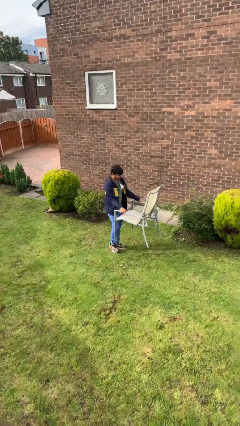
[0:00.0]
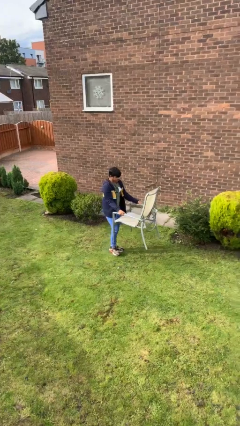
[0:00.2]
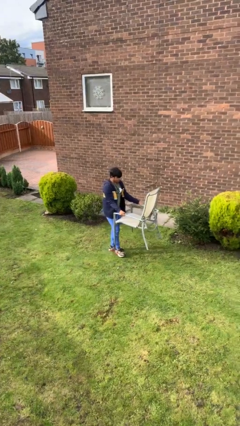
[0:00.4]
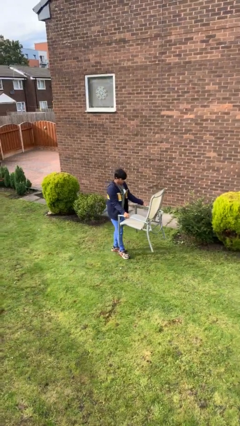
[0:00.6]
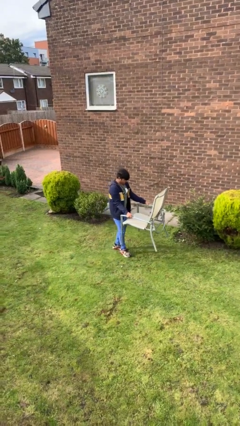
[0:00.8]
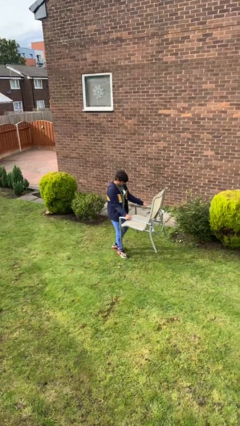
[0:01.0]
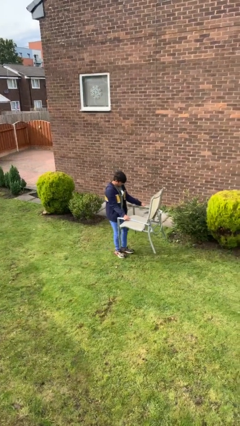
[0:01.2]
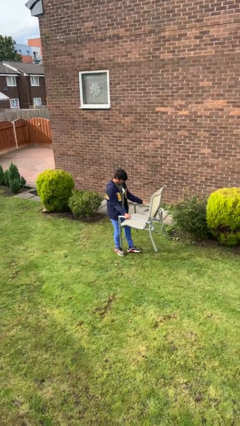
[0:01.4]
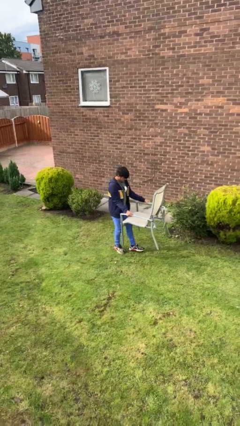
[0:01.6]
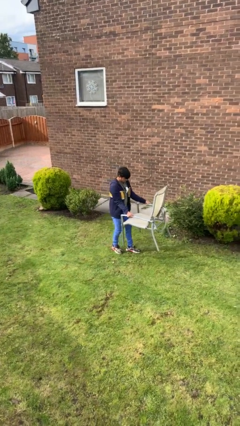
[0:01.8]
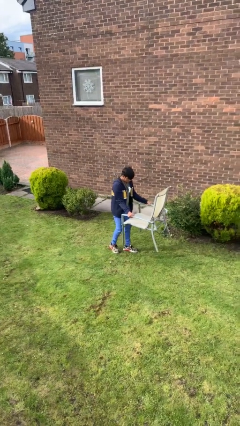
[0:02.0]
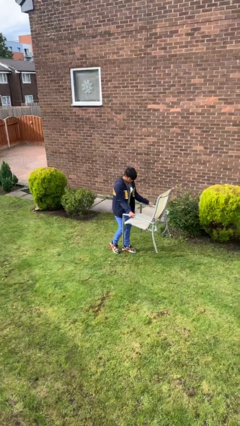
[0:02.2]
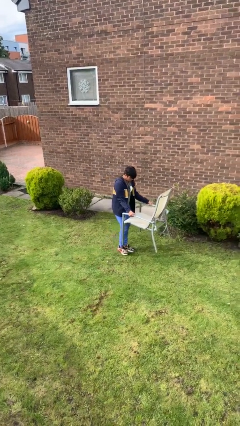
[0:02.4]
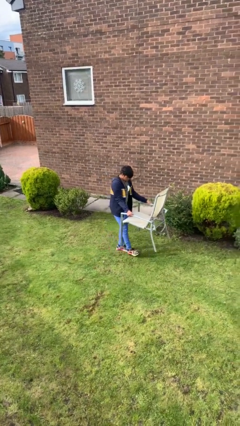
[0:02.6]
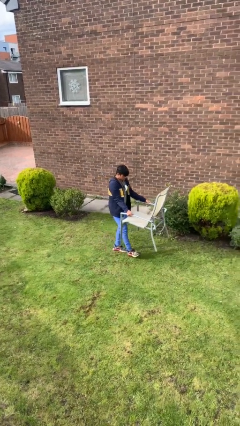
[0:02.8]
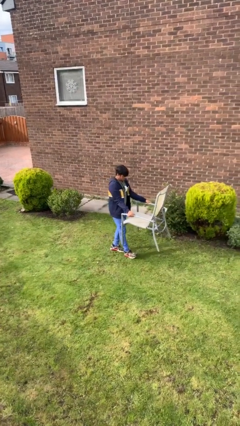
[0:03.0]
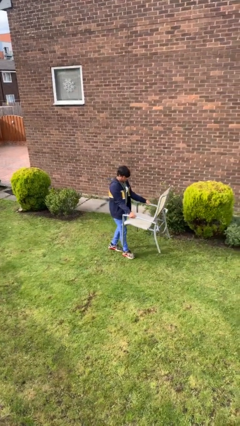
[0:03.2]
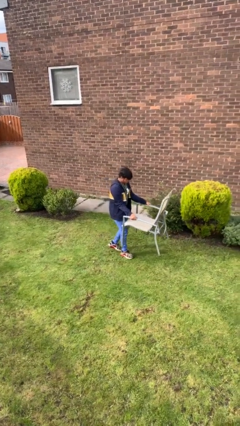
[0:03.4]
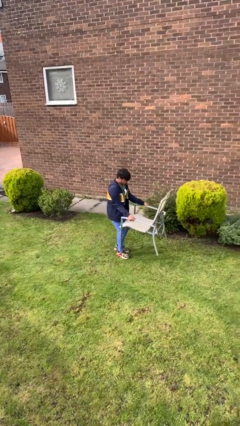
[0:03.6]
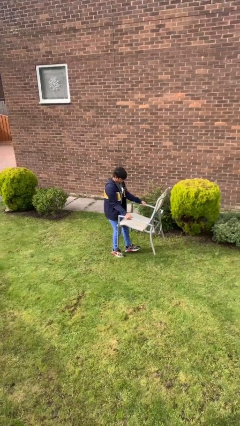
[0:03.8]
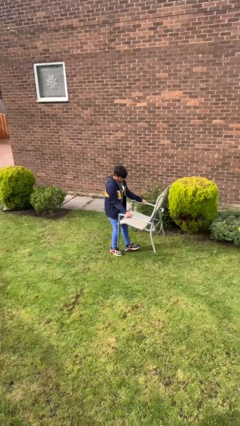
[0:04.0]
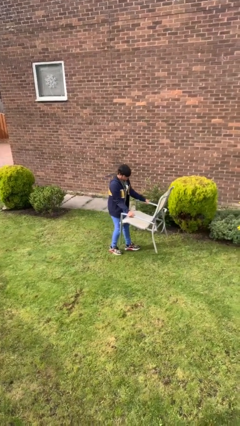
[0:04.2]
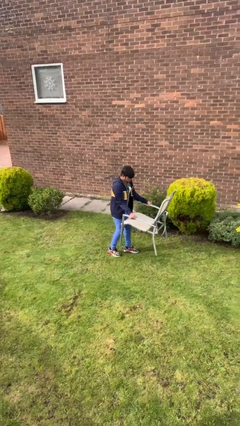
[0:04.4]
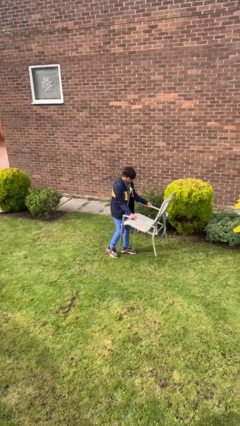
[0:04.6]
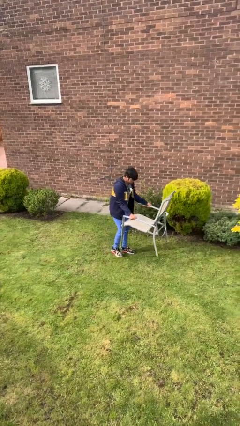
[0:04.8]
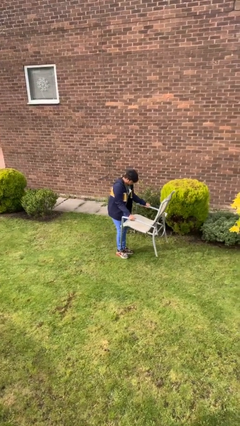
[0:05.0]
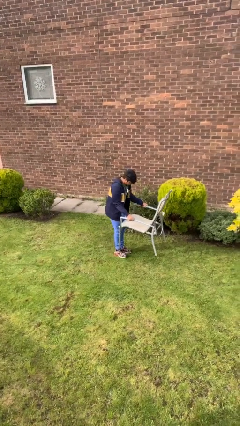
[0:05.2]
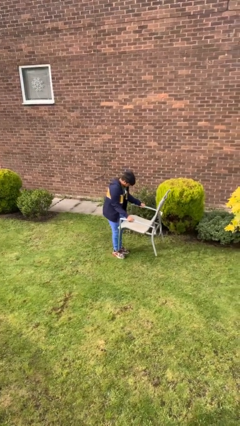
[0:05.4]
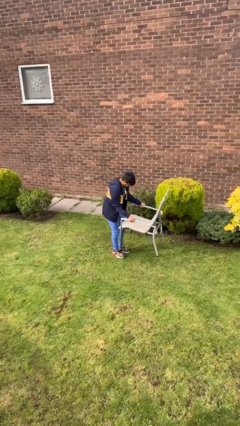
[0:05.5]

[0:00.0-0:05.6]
person carries heavy object

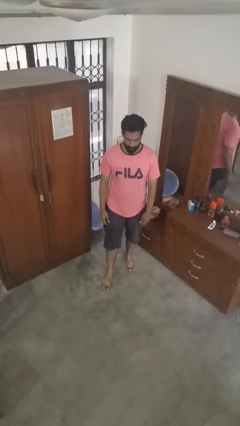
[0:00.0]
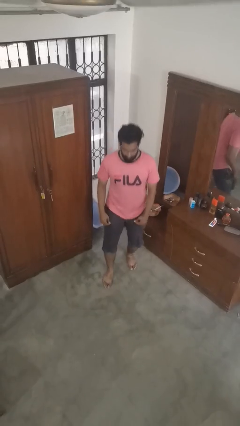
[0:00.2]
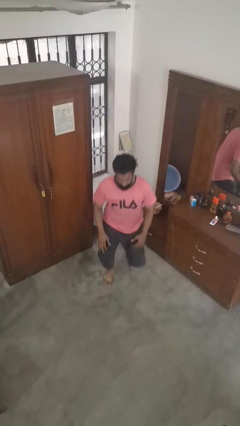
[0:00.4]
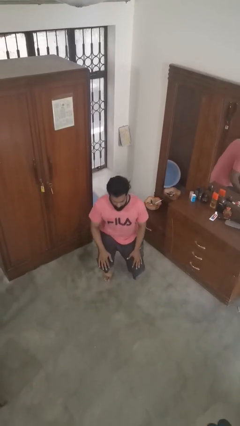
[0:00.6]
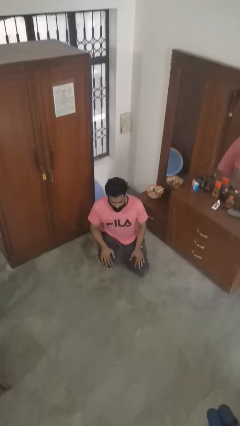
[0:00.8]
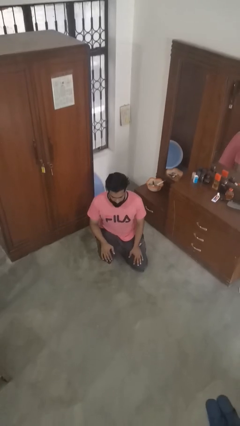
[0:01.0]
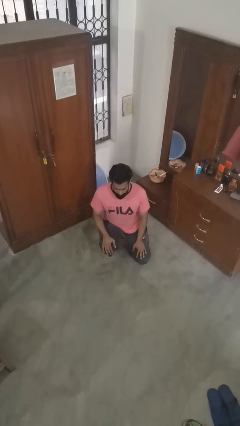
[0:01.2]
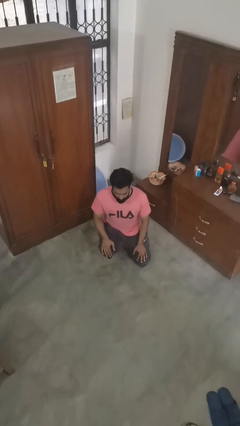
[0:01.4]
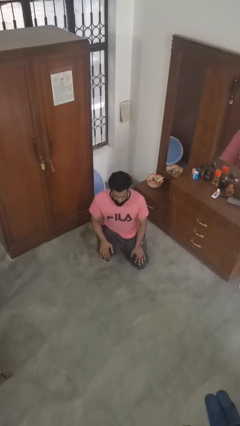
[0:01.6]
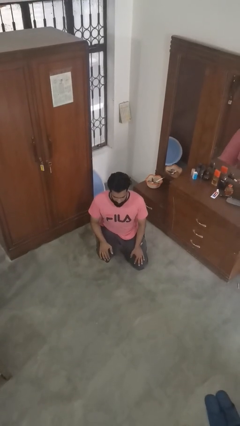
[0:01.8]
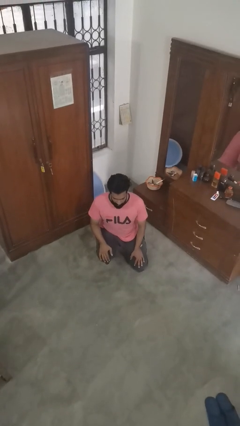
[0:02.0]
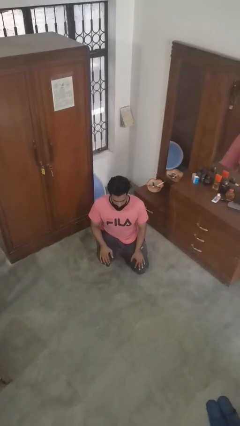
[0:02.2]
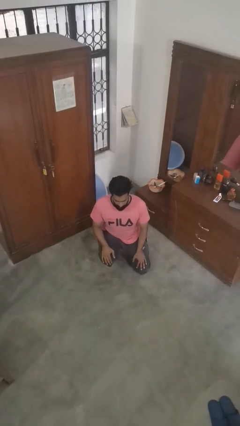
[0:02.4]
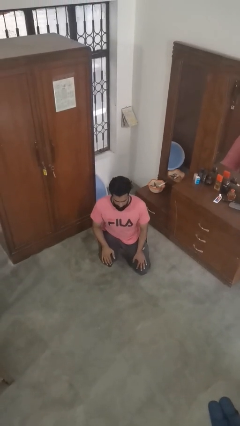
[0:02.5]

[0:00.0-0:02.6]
person kneels

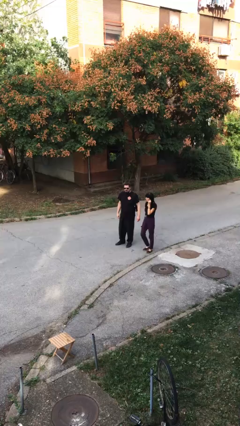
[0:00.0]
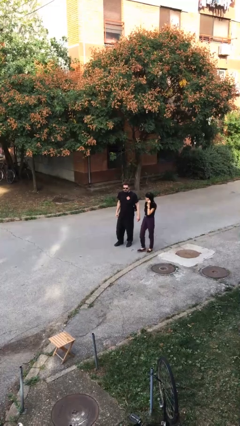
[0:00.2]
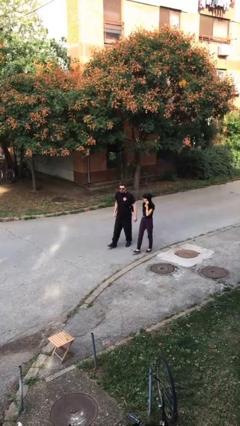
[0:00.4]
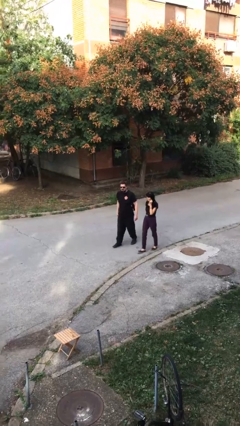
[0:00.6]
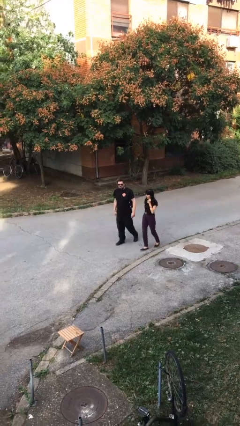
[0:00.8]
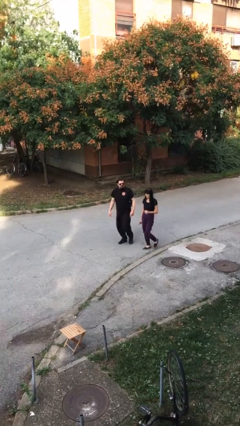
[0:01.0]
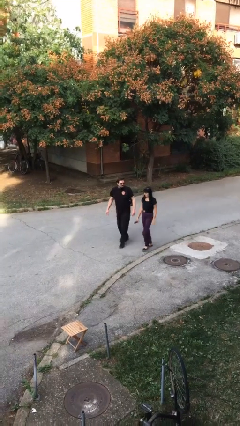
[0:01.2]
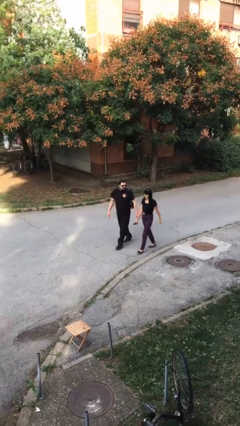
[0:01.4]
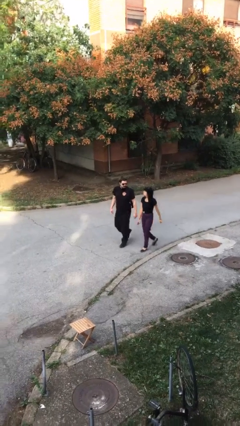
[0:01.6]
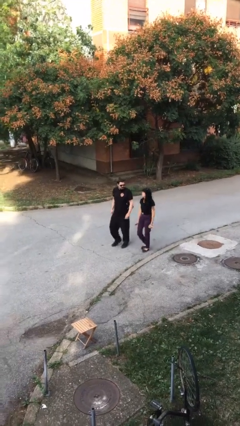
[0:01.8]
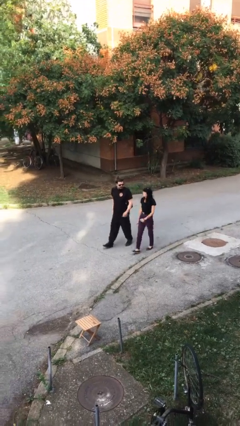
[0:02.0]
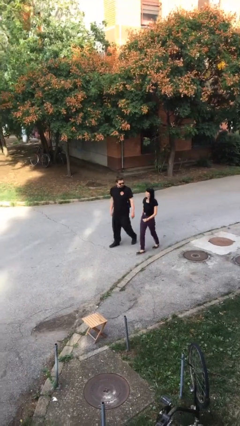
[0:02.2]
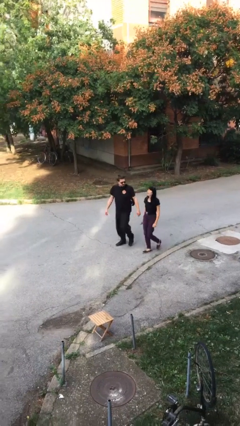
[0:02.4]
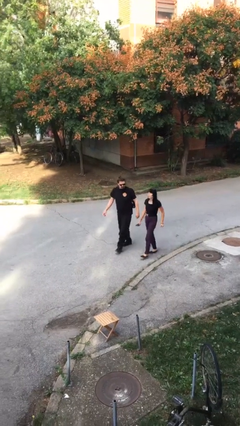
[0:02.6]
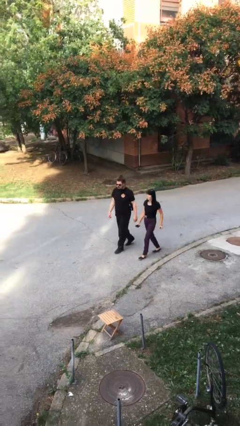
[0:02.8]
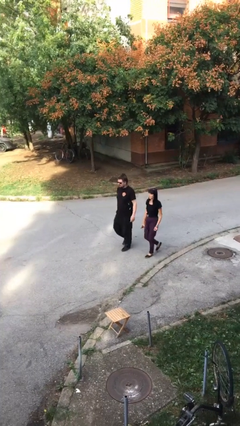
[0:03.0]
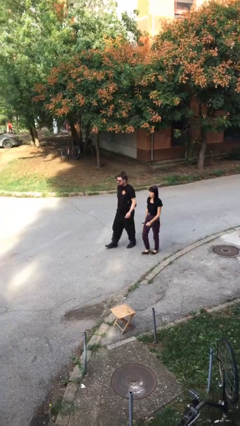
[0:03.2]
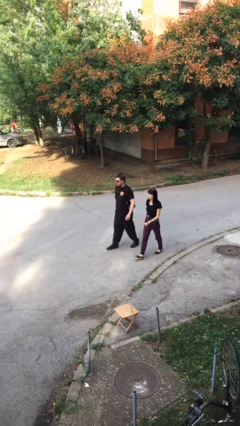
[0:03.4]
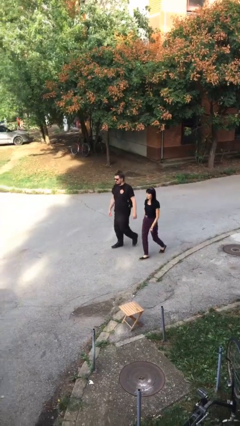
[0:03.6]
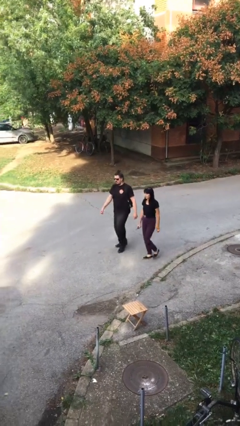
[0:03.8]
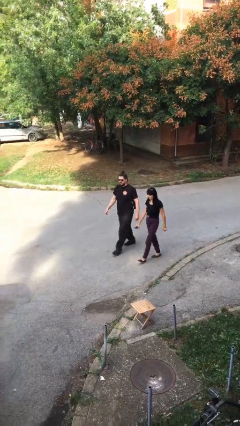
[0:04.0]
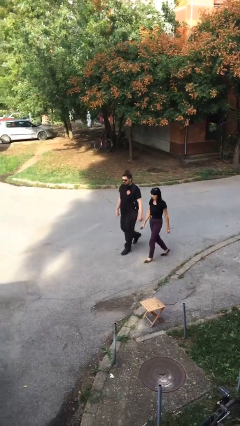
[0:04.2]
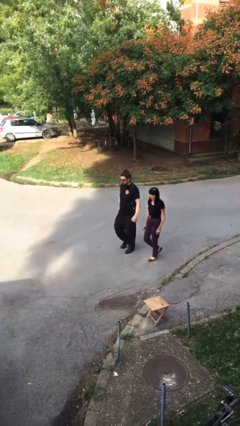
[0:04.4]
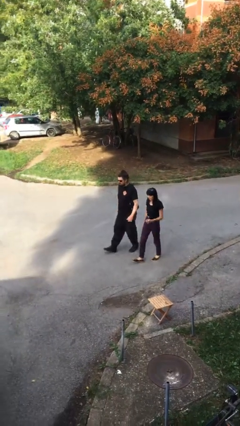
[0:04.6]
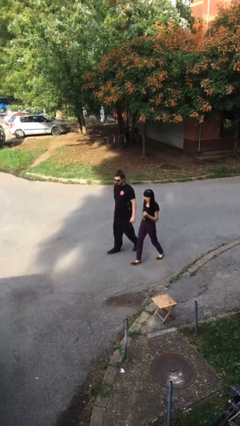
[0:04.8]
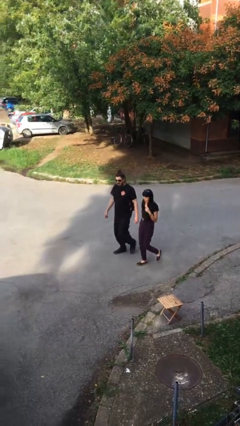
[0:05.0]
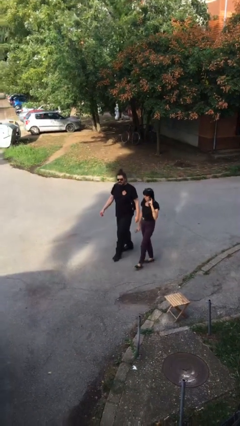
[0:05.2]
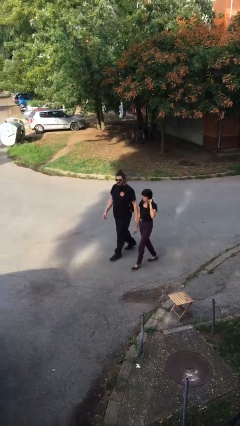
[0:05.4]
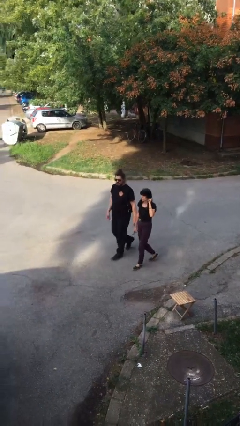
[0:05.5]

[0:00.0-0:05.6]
person talks to person

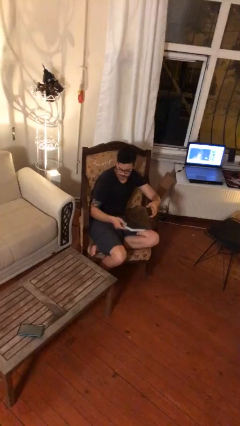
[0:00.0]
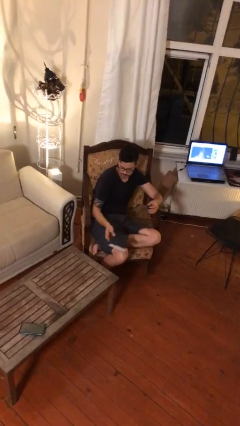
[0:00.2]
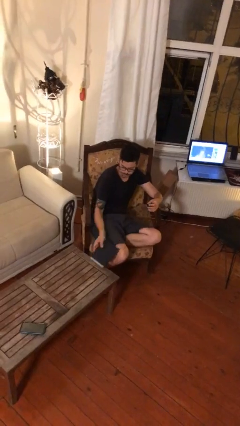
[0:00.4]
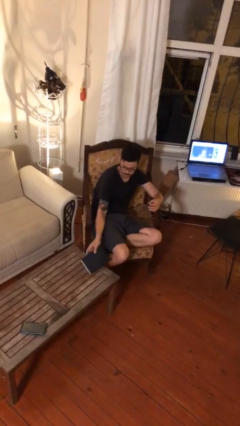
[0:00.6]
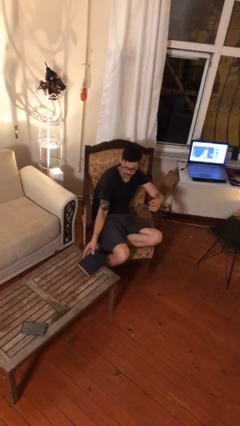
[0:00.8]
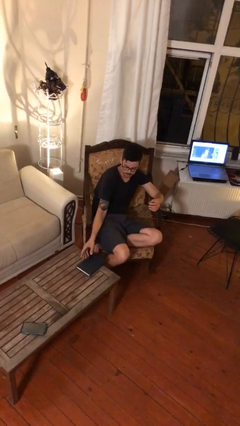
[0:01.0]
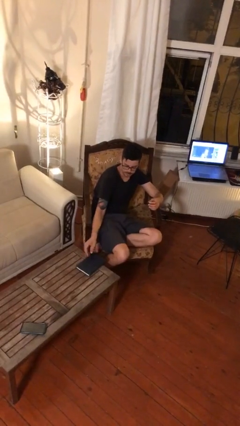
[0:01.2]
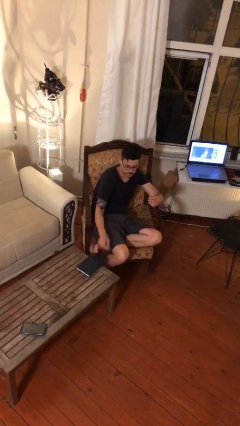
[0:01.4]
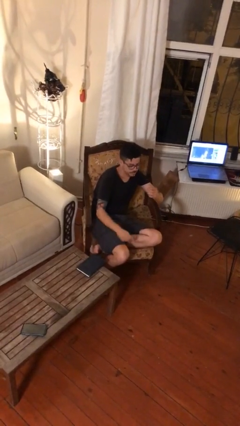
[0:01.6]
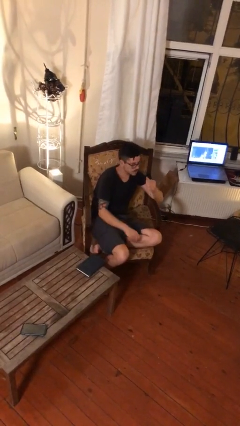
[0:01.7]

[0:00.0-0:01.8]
person puts down object on table

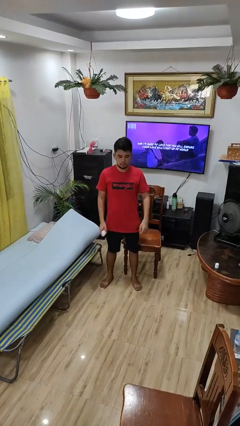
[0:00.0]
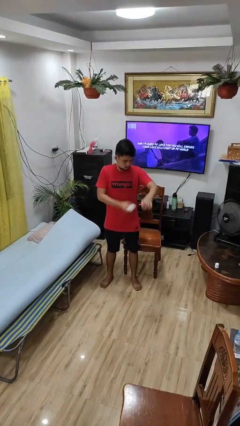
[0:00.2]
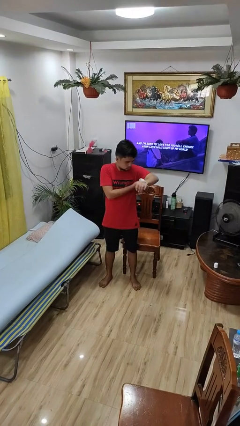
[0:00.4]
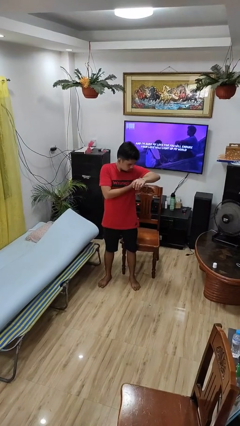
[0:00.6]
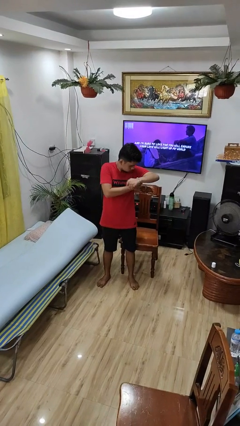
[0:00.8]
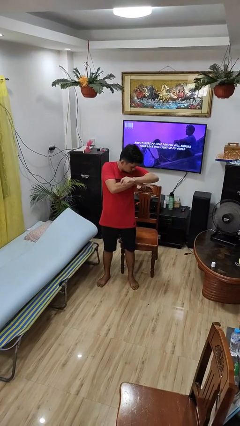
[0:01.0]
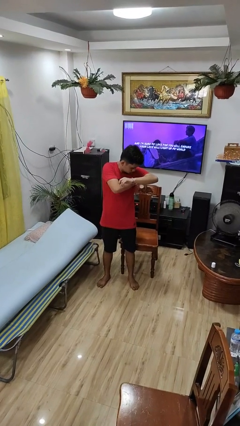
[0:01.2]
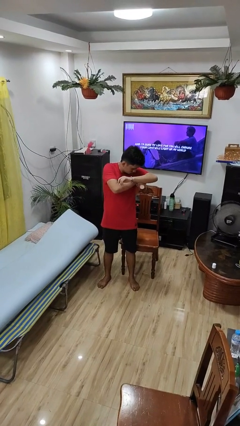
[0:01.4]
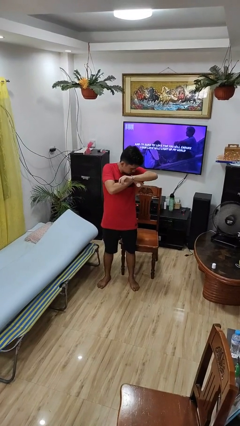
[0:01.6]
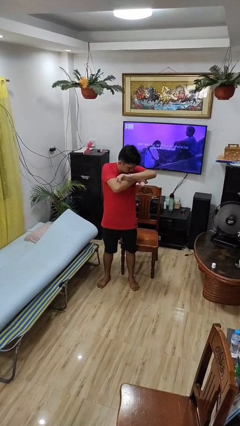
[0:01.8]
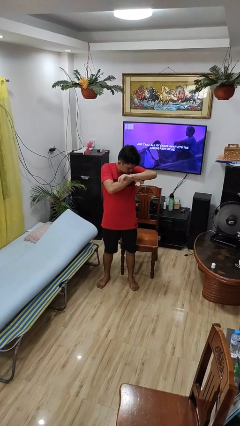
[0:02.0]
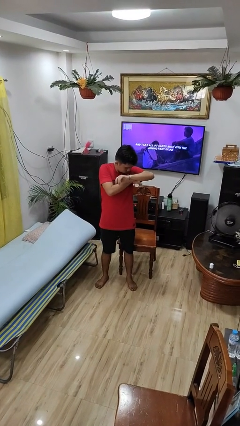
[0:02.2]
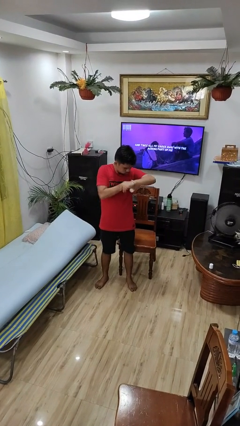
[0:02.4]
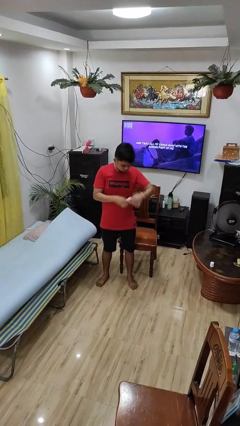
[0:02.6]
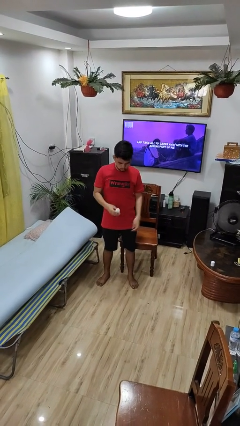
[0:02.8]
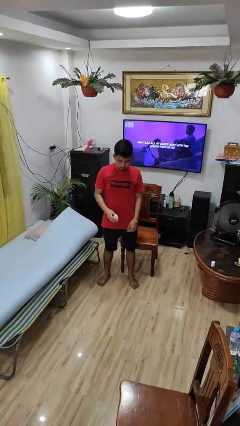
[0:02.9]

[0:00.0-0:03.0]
person applies deodorant
